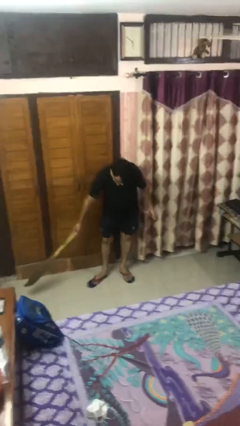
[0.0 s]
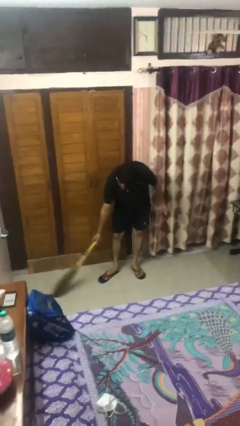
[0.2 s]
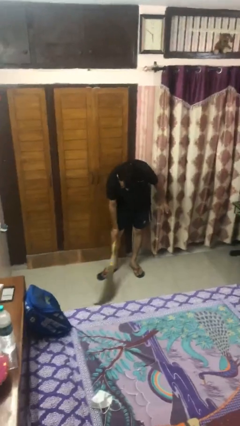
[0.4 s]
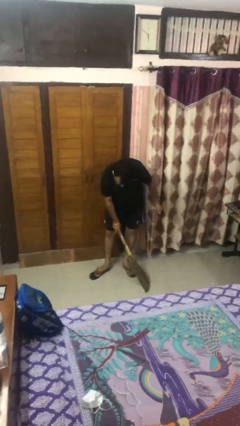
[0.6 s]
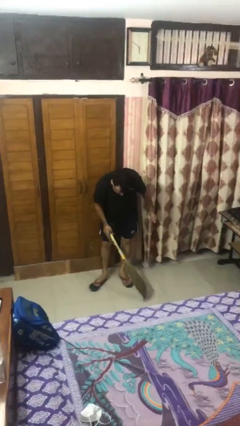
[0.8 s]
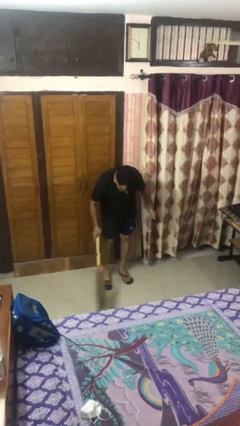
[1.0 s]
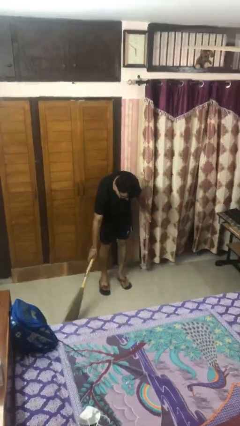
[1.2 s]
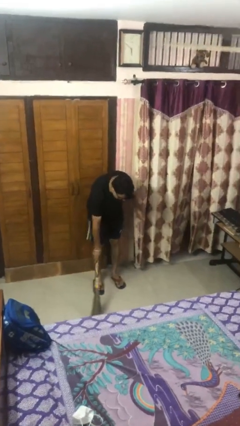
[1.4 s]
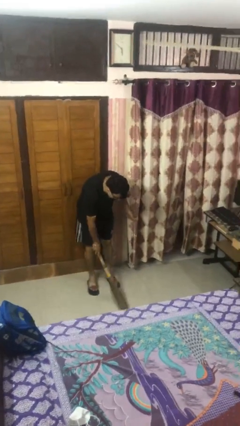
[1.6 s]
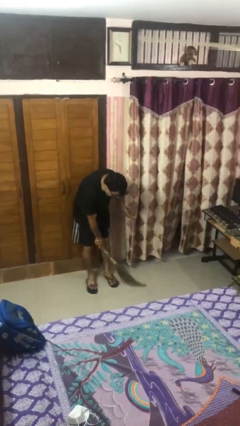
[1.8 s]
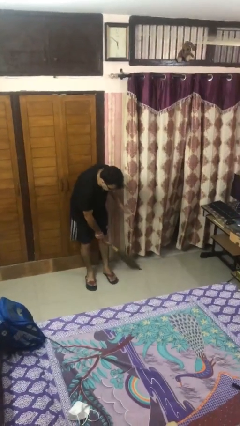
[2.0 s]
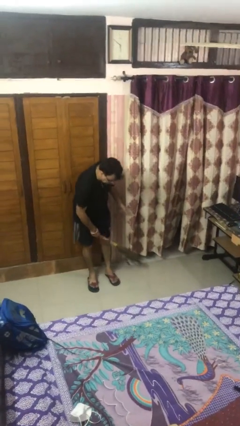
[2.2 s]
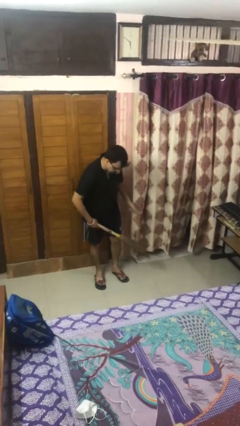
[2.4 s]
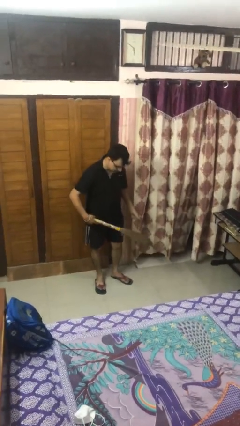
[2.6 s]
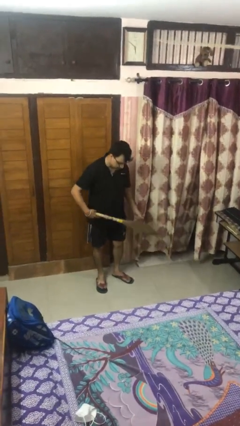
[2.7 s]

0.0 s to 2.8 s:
person sweeps floor

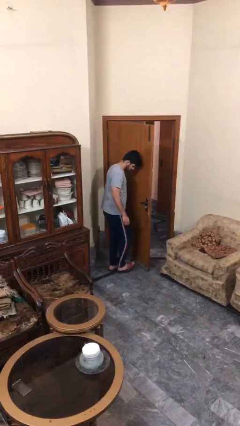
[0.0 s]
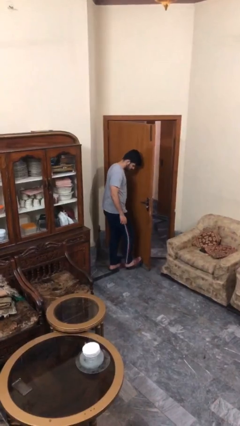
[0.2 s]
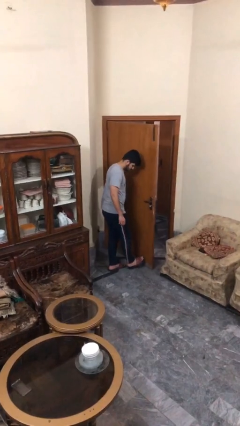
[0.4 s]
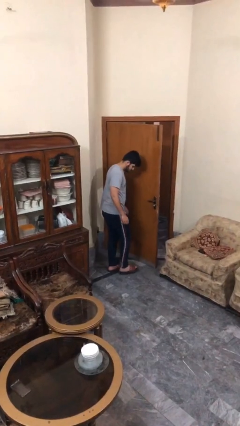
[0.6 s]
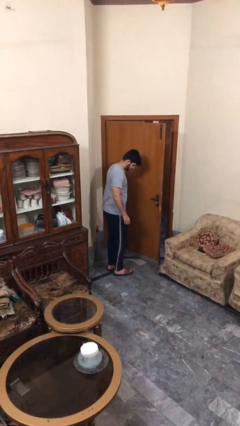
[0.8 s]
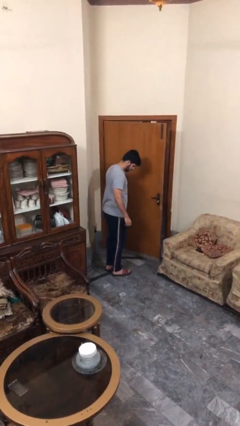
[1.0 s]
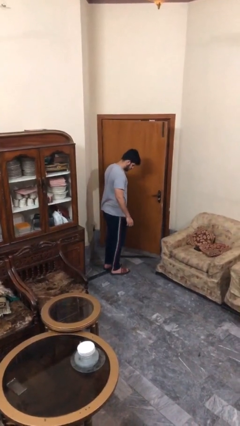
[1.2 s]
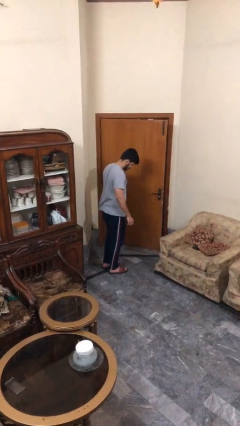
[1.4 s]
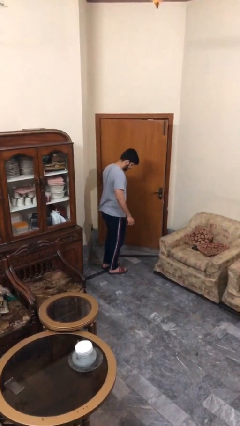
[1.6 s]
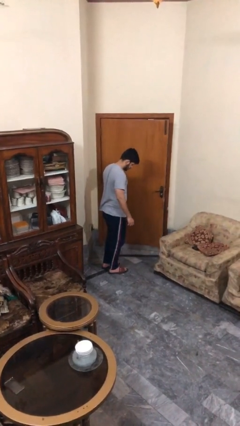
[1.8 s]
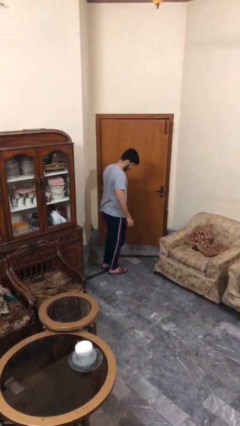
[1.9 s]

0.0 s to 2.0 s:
person closes door with foot

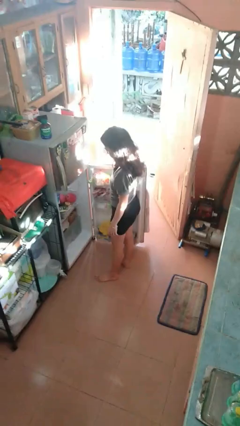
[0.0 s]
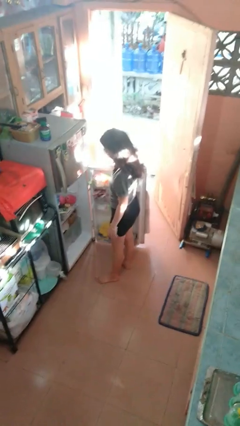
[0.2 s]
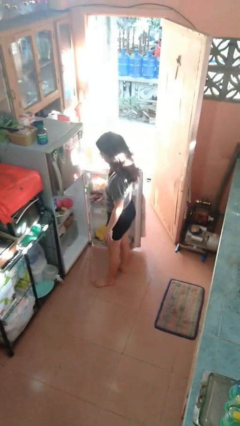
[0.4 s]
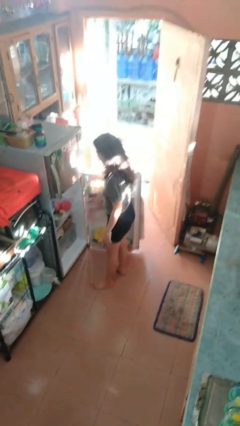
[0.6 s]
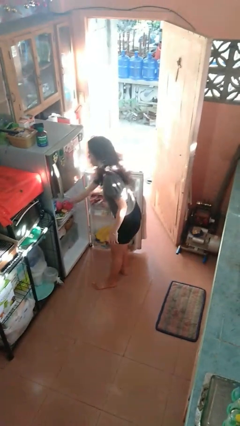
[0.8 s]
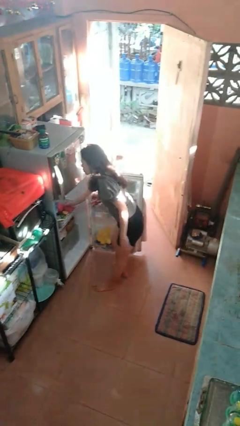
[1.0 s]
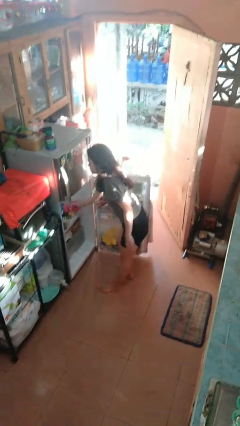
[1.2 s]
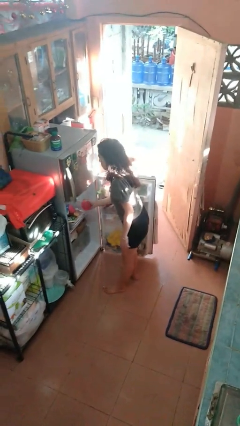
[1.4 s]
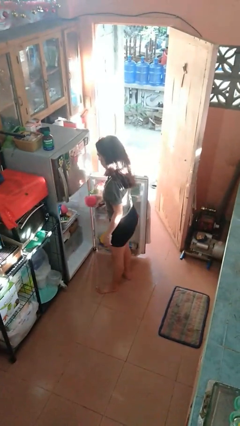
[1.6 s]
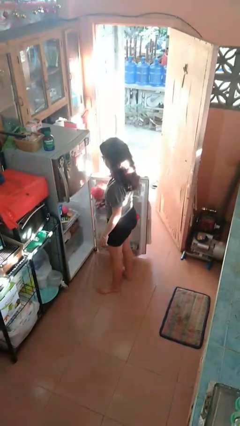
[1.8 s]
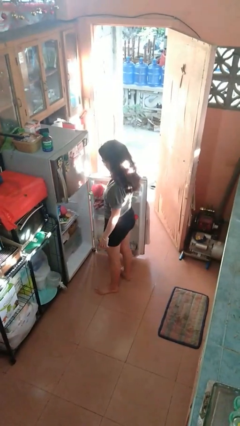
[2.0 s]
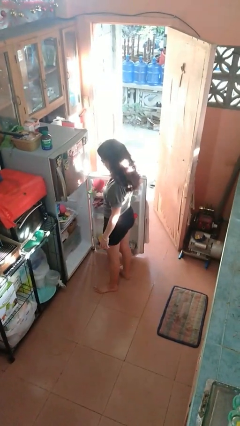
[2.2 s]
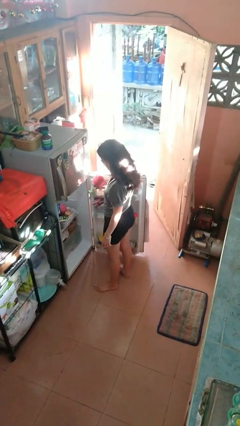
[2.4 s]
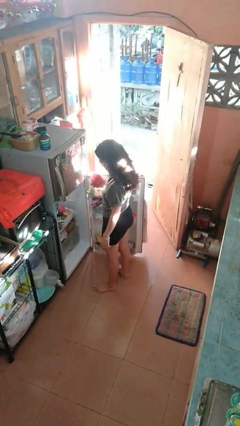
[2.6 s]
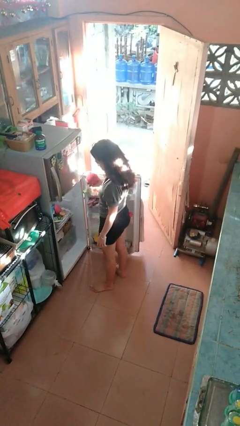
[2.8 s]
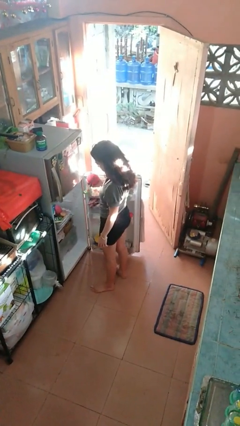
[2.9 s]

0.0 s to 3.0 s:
person takes object from refrigerator

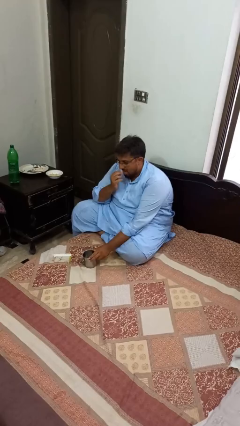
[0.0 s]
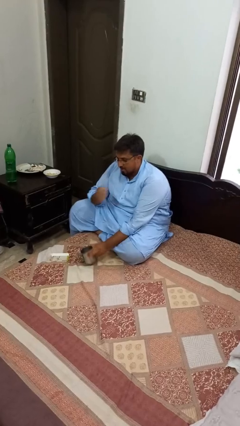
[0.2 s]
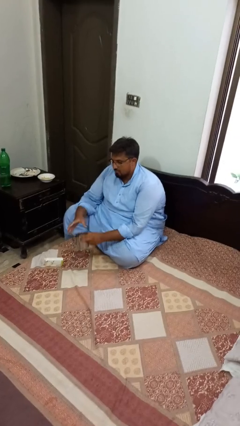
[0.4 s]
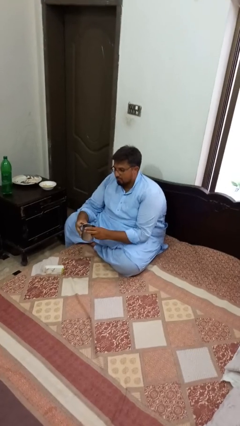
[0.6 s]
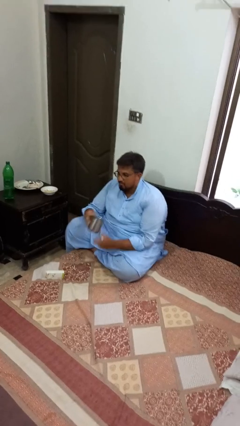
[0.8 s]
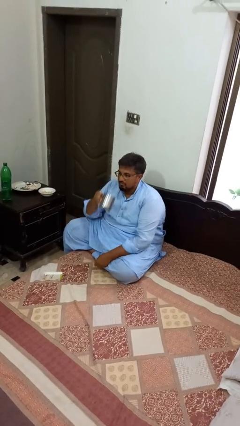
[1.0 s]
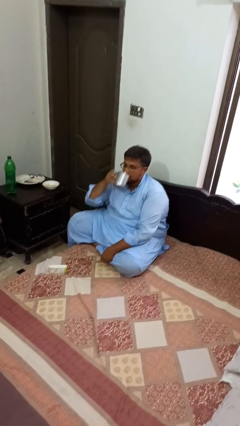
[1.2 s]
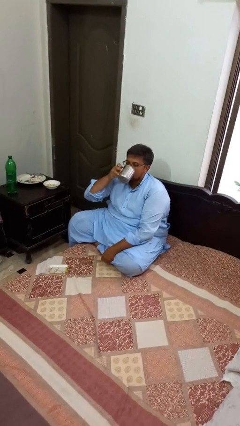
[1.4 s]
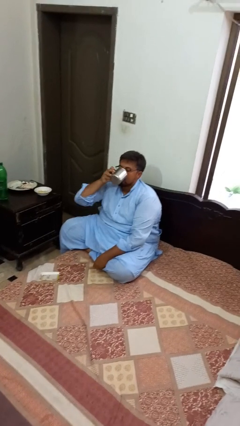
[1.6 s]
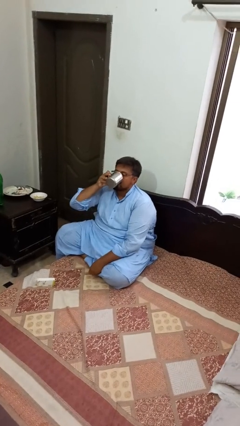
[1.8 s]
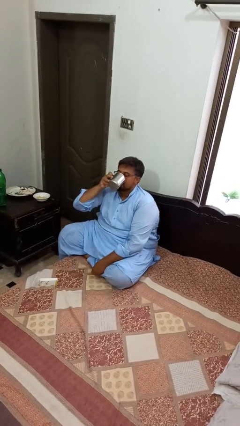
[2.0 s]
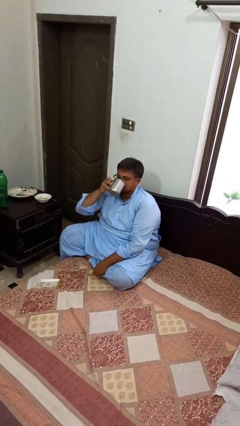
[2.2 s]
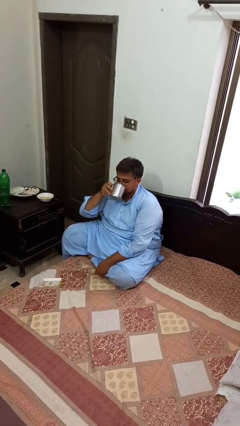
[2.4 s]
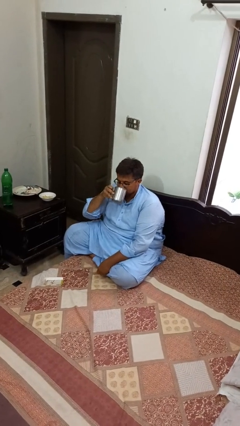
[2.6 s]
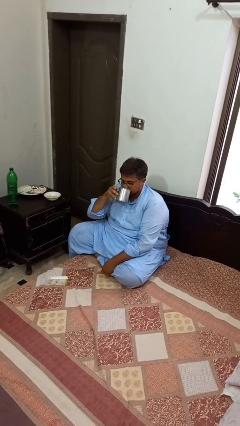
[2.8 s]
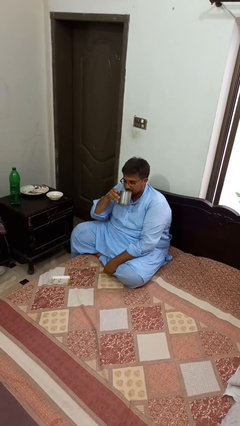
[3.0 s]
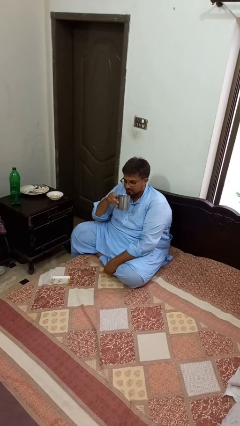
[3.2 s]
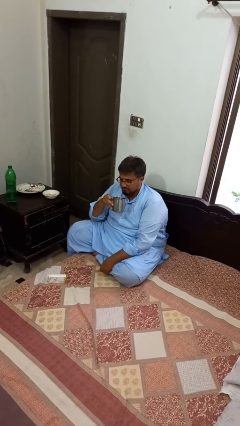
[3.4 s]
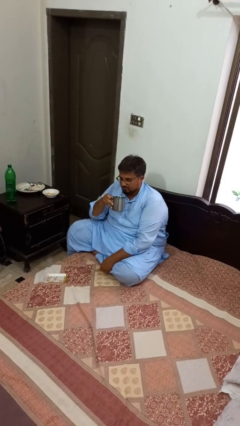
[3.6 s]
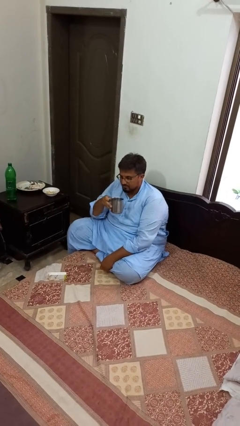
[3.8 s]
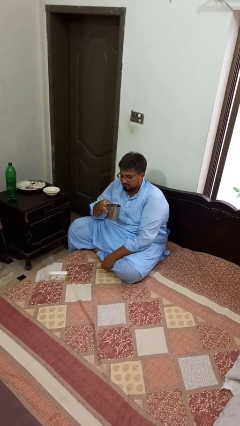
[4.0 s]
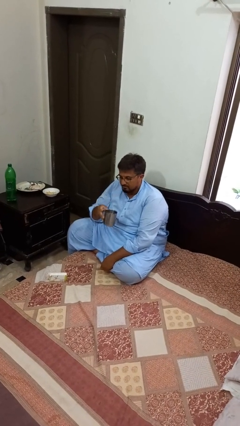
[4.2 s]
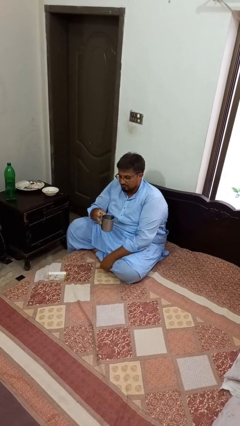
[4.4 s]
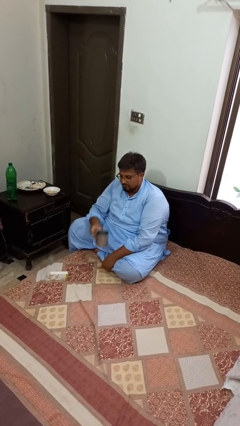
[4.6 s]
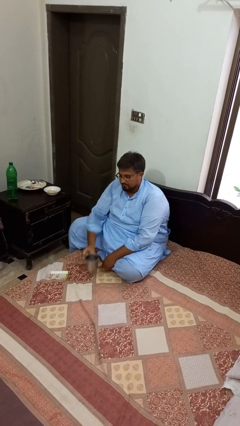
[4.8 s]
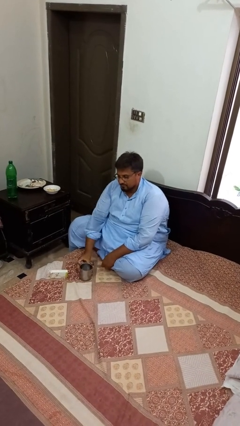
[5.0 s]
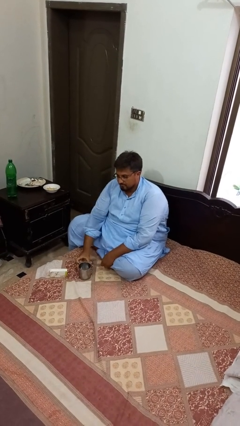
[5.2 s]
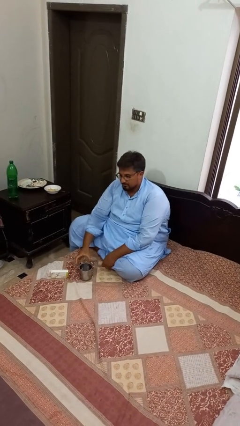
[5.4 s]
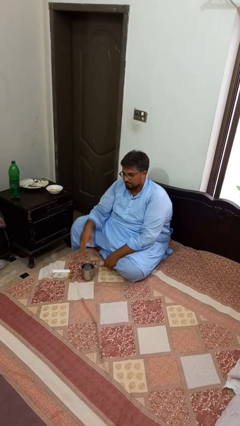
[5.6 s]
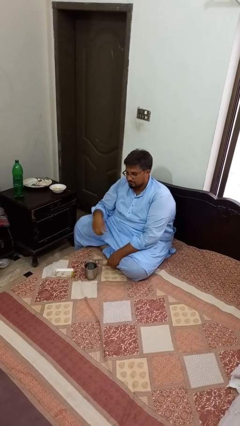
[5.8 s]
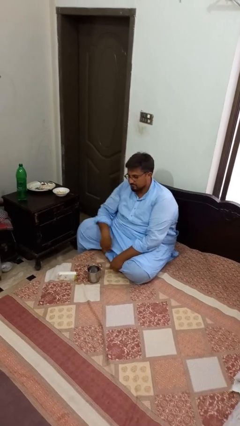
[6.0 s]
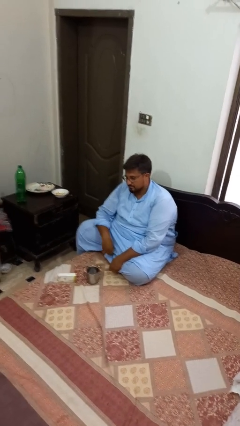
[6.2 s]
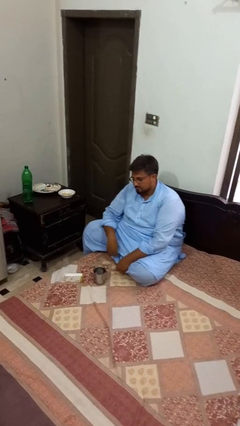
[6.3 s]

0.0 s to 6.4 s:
person drinks from cup

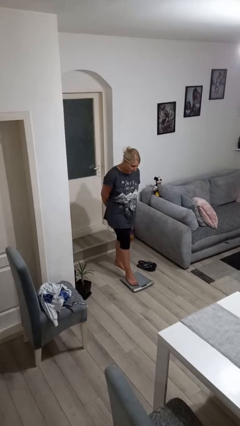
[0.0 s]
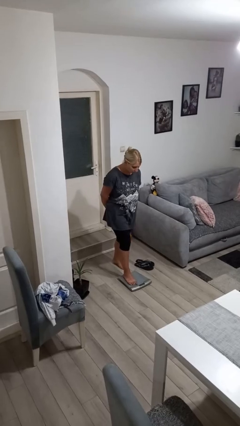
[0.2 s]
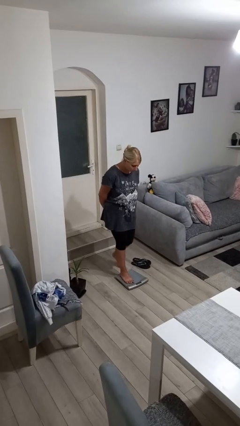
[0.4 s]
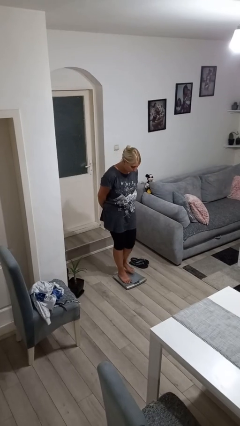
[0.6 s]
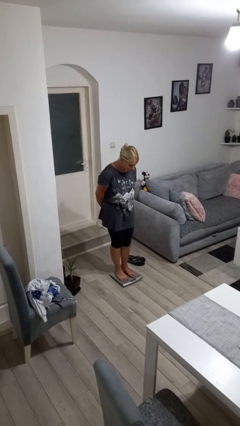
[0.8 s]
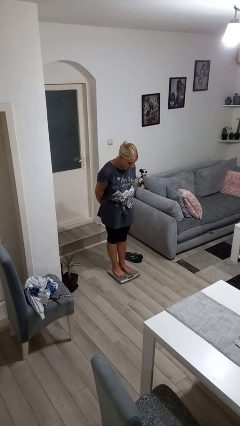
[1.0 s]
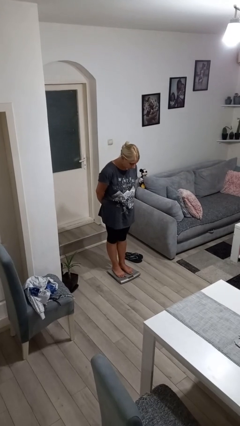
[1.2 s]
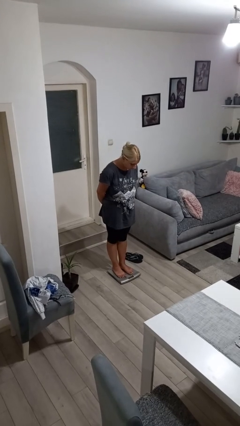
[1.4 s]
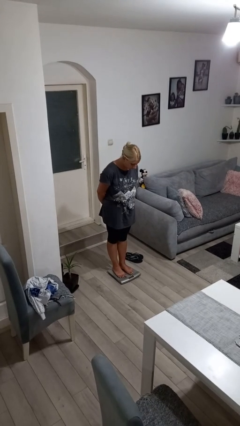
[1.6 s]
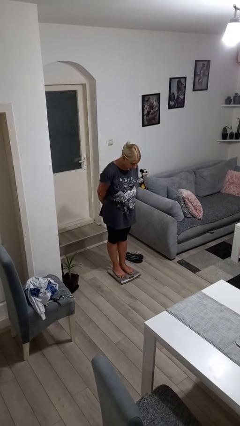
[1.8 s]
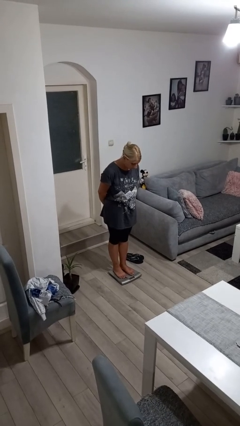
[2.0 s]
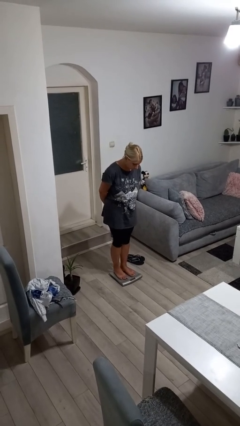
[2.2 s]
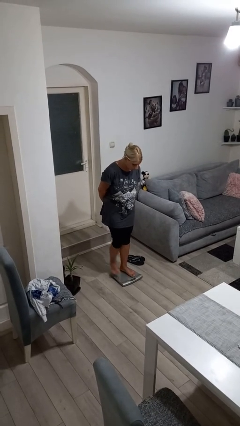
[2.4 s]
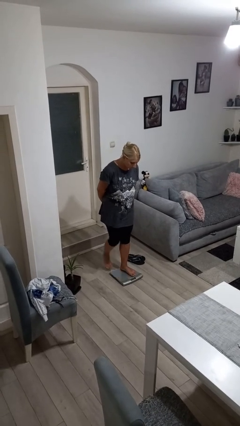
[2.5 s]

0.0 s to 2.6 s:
person uses bodyweight scale

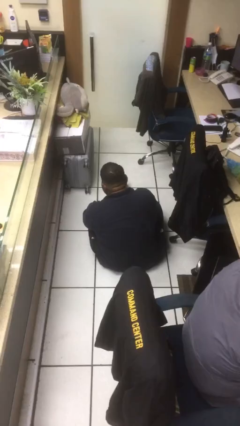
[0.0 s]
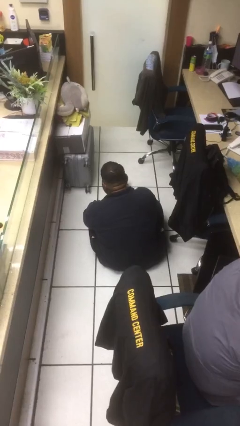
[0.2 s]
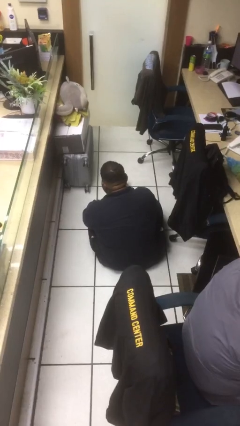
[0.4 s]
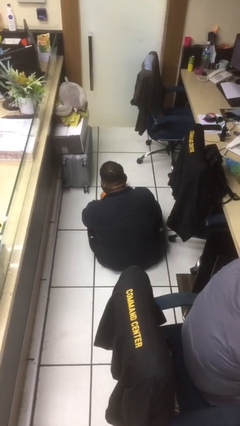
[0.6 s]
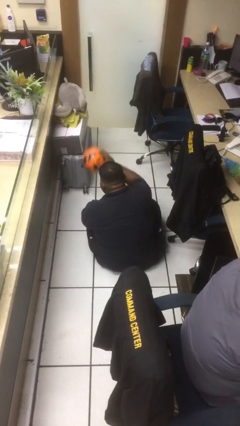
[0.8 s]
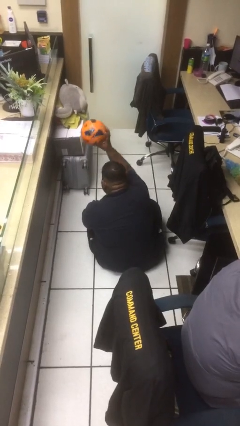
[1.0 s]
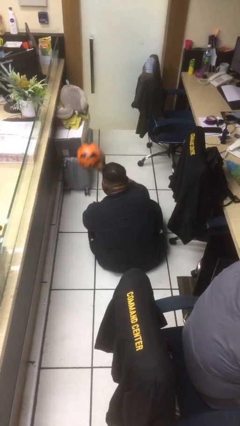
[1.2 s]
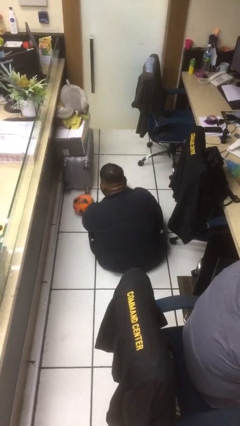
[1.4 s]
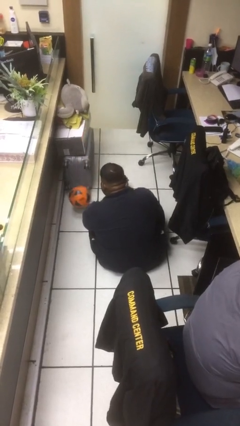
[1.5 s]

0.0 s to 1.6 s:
person bounces ball on floor
